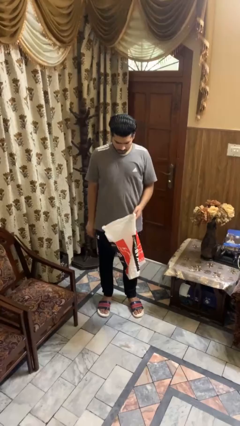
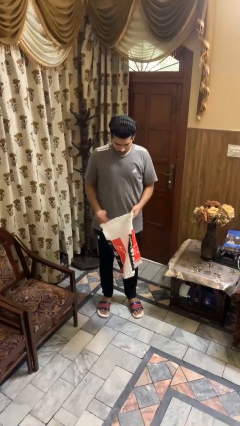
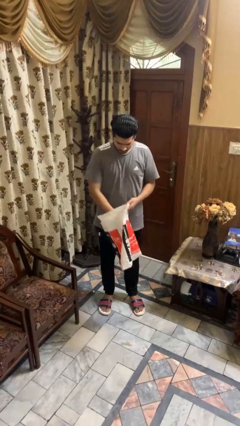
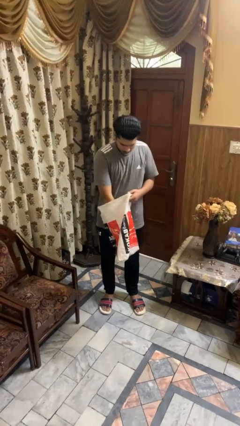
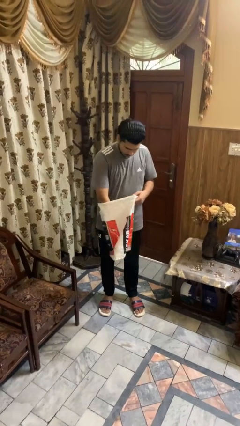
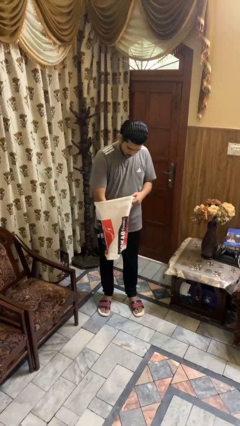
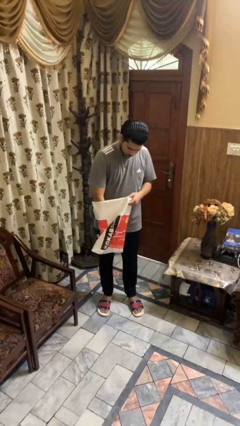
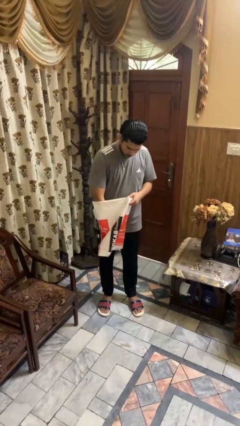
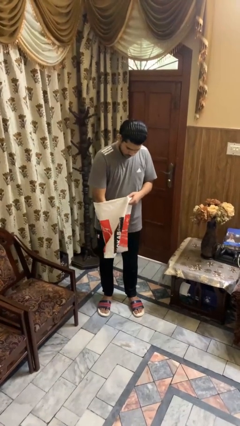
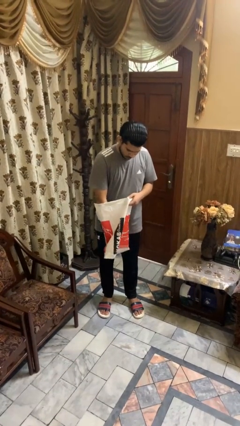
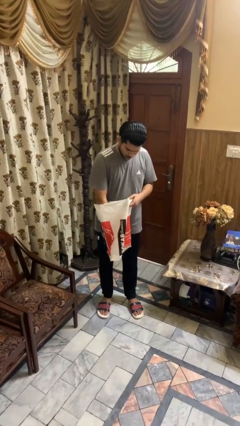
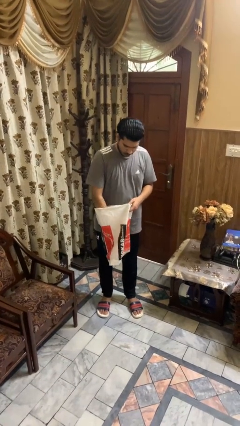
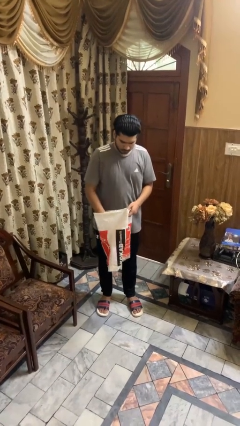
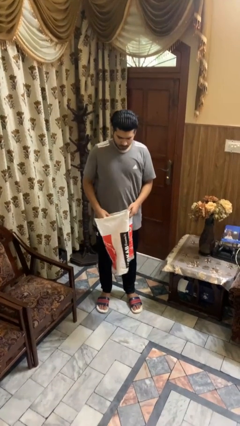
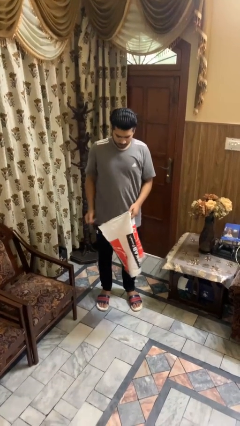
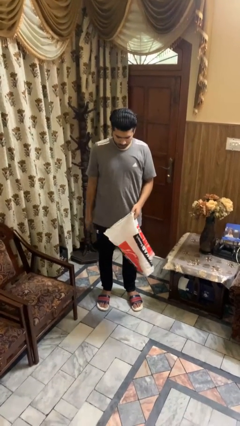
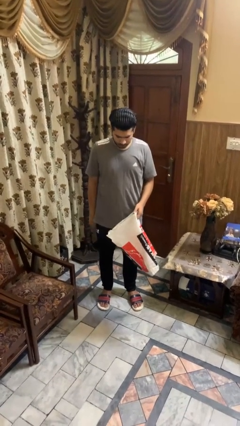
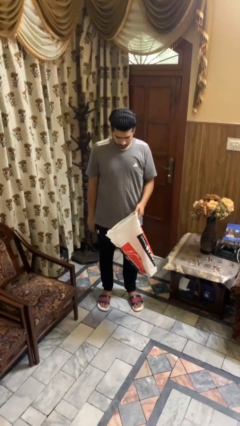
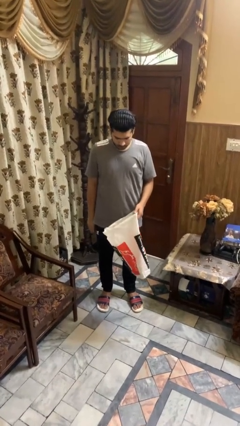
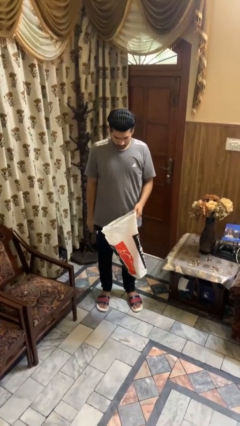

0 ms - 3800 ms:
person searches in bag

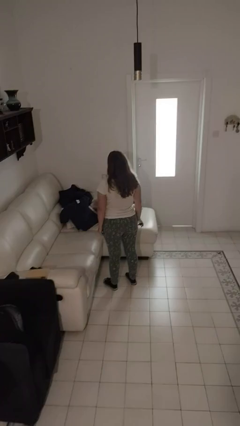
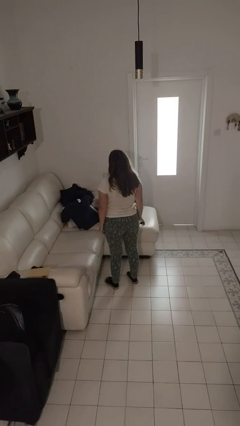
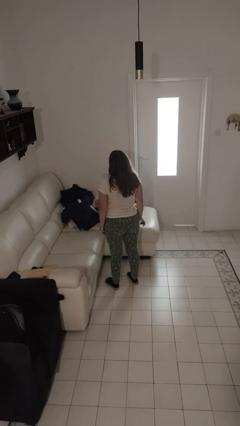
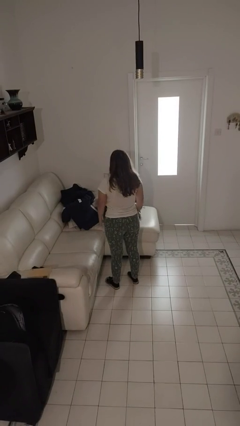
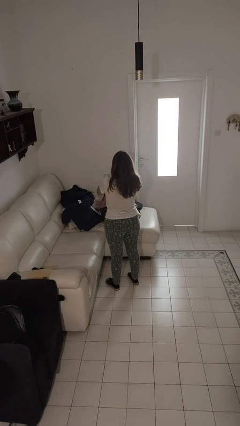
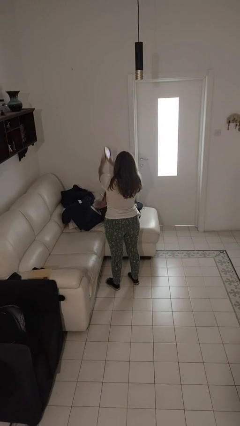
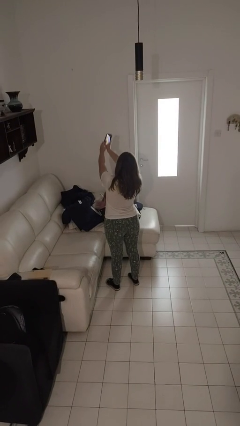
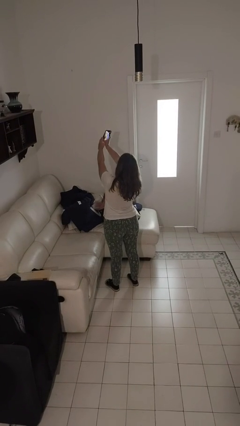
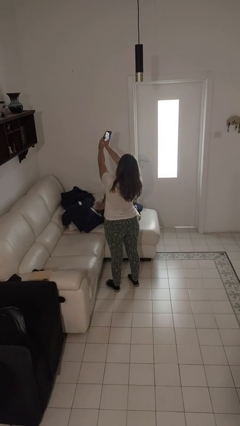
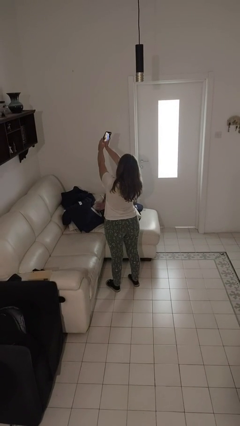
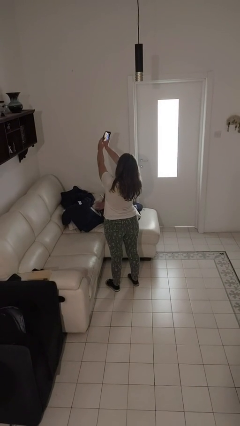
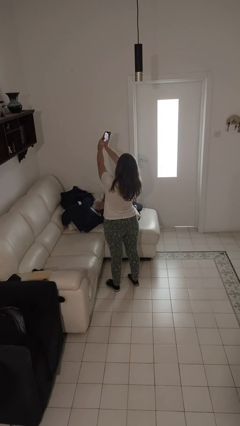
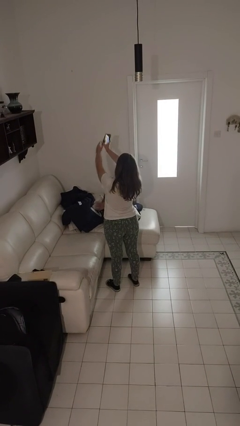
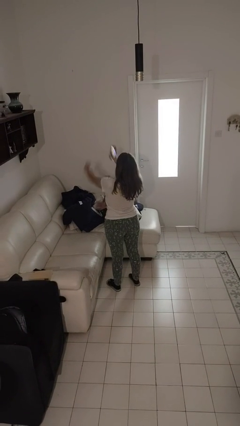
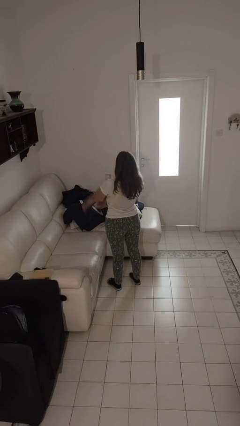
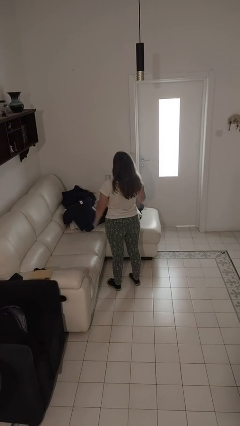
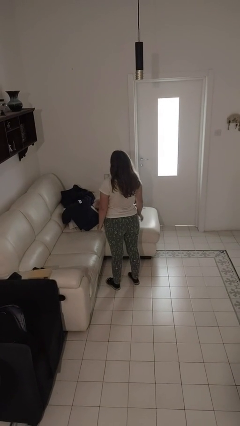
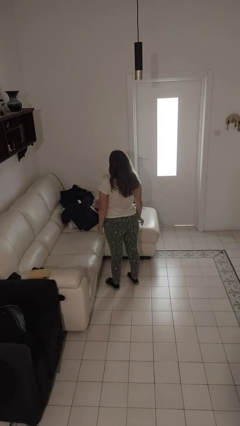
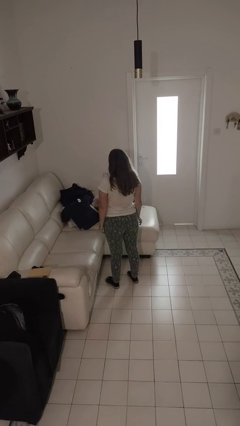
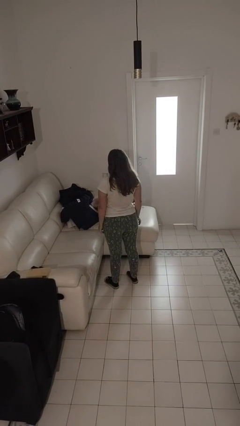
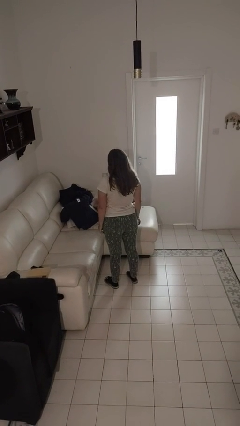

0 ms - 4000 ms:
person takes selfie

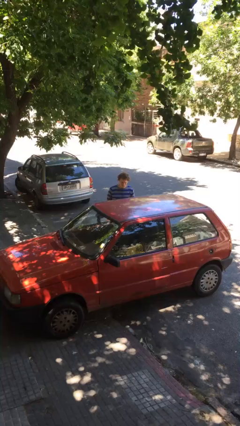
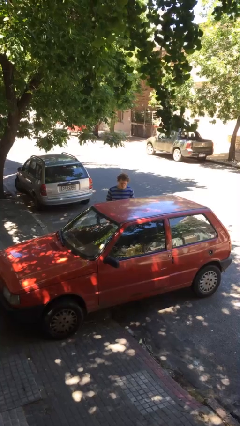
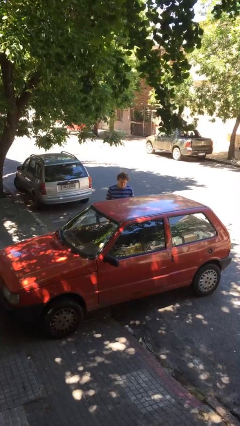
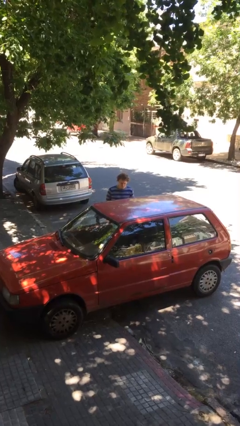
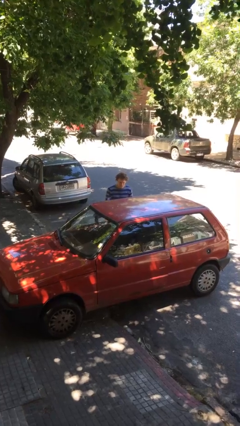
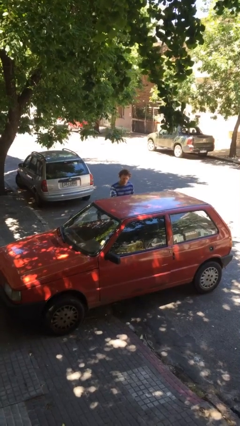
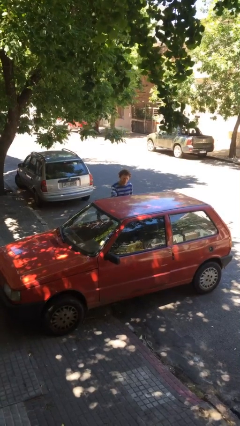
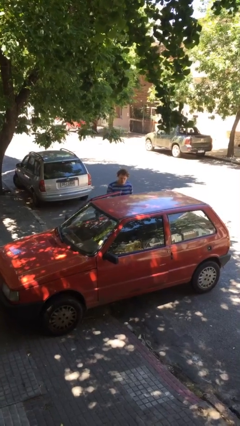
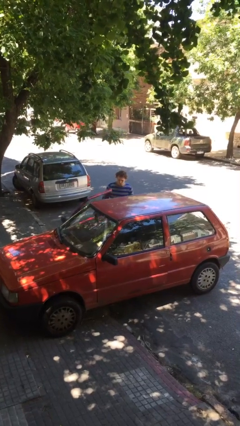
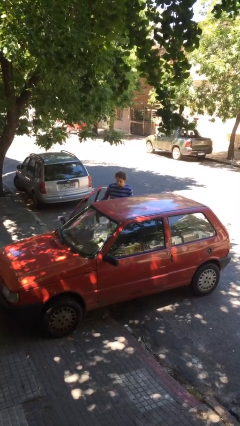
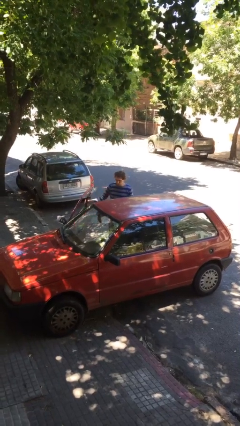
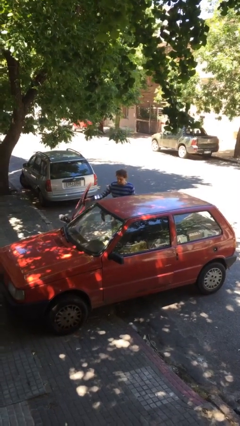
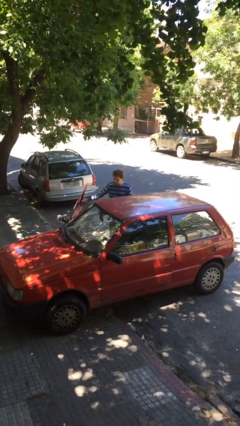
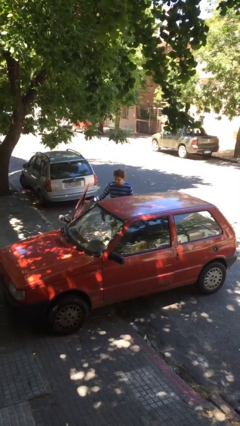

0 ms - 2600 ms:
person opens car door

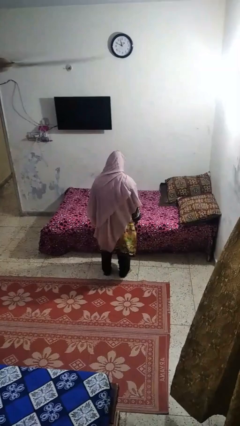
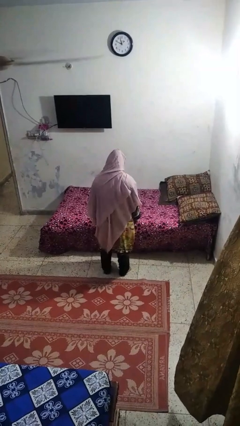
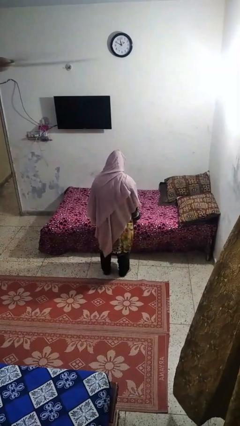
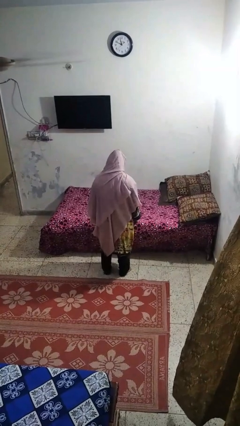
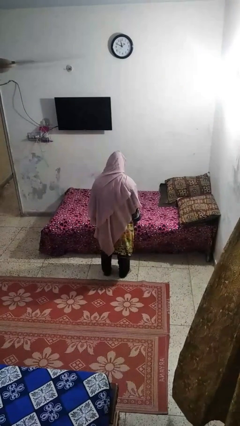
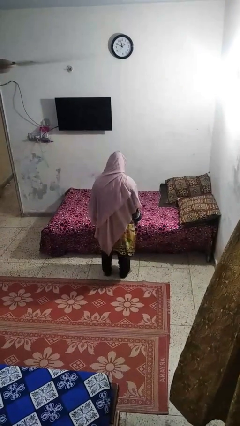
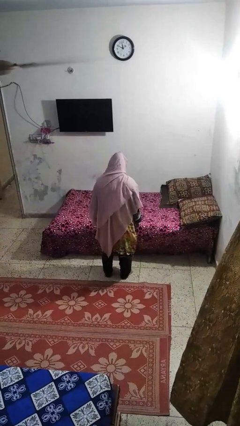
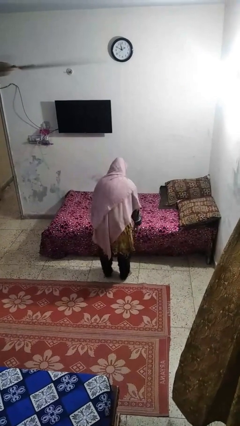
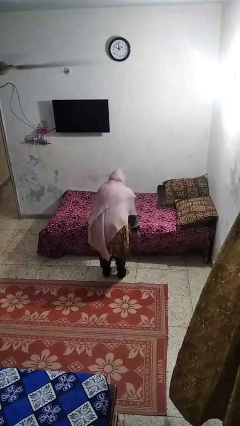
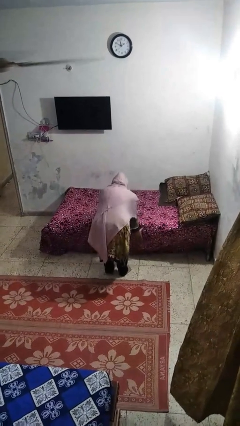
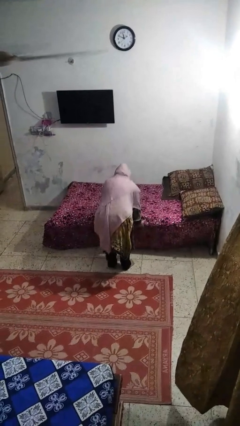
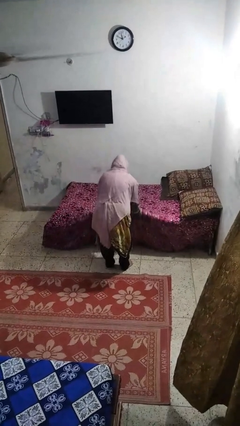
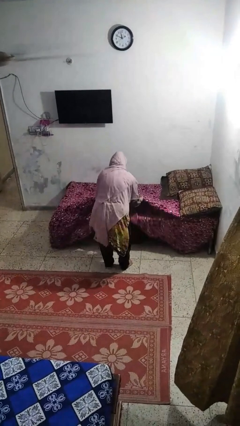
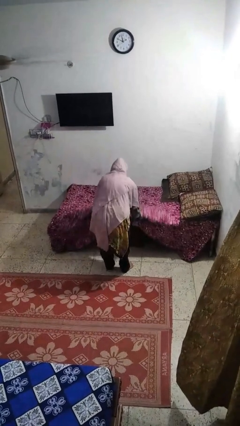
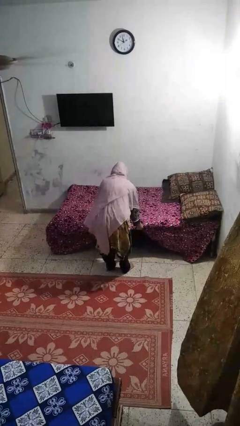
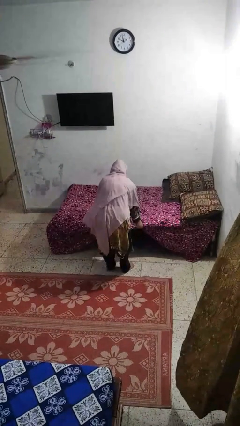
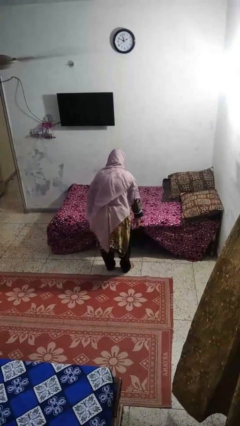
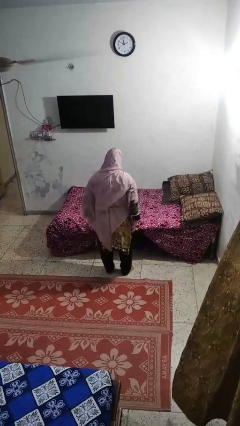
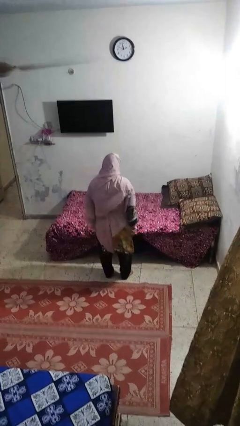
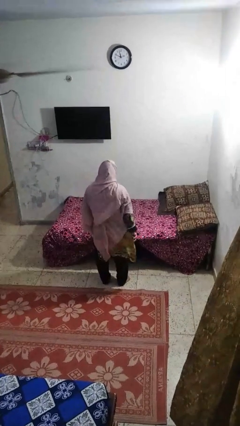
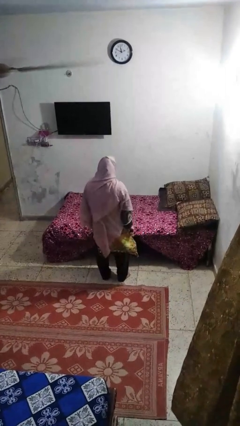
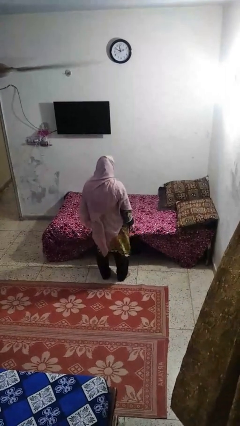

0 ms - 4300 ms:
person makes bed

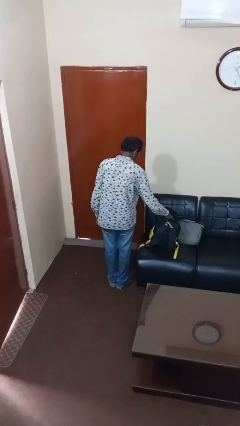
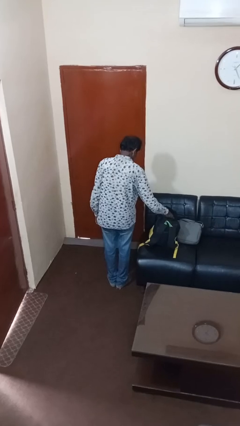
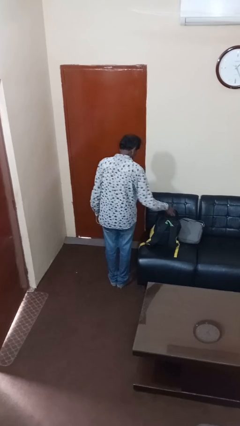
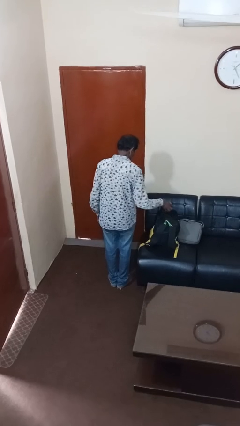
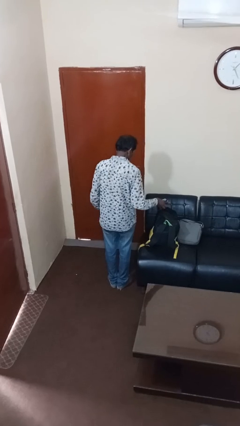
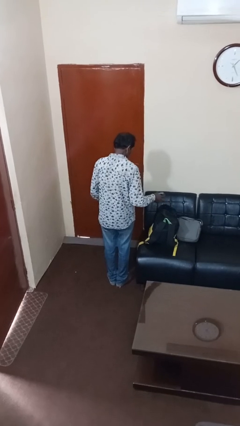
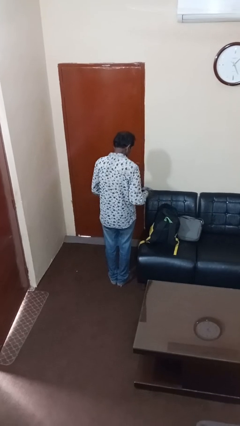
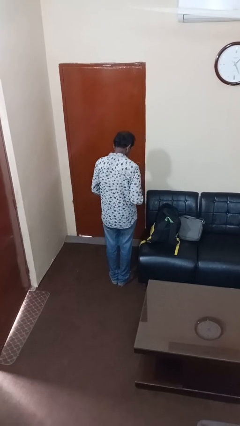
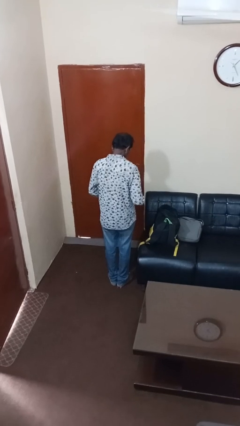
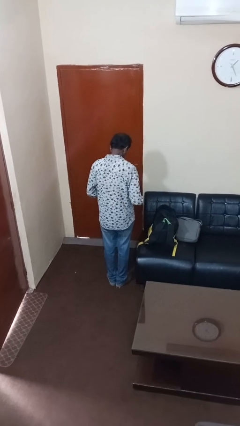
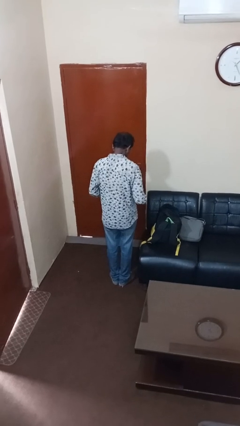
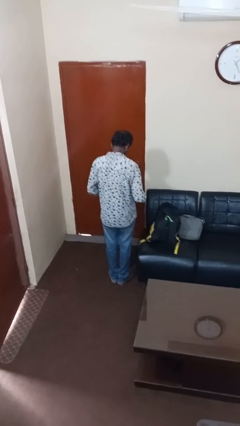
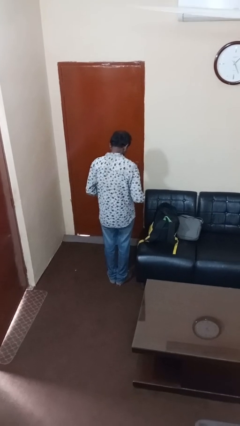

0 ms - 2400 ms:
person takes object from backpack
